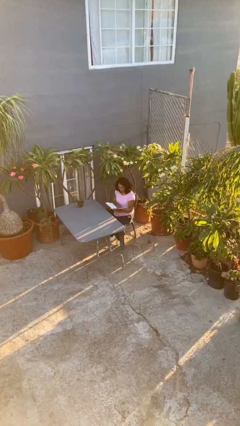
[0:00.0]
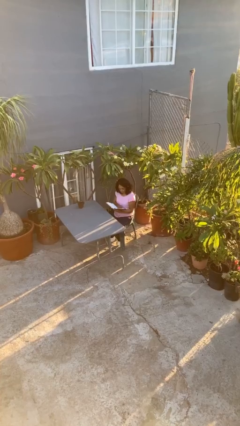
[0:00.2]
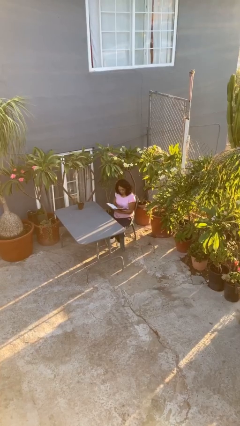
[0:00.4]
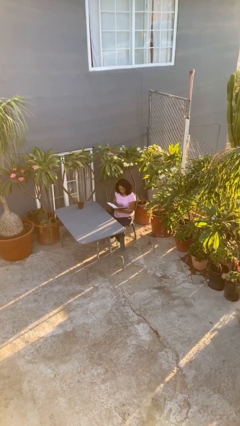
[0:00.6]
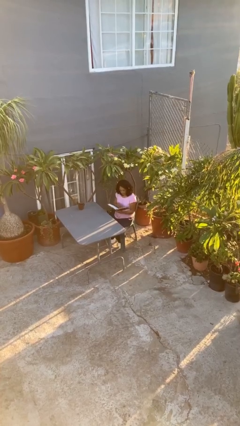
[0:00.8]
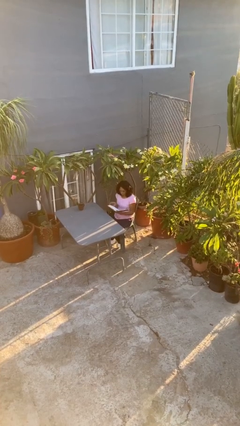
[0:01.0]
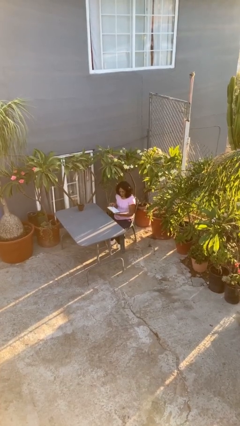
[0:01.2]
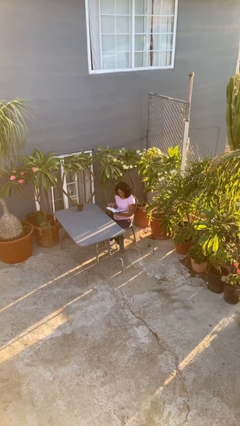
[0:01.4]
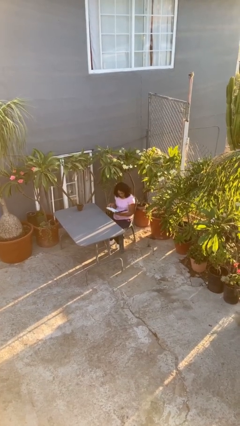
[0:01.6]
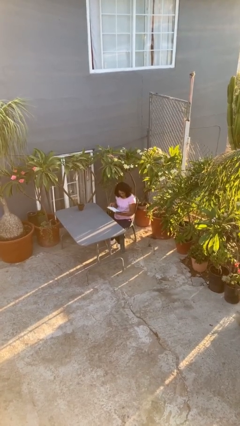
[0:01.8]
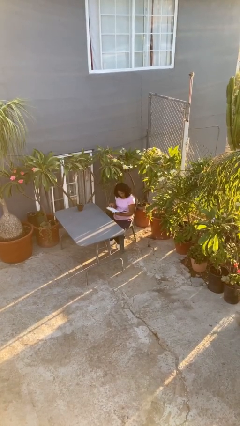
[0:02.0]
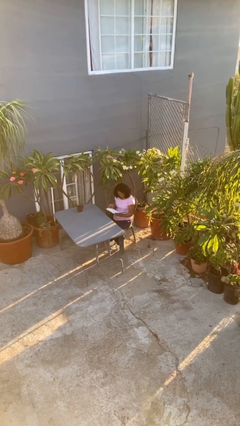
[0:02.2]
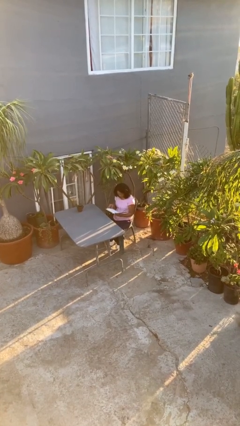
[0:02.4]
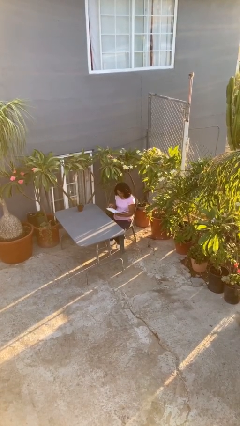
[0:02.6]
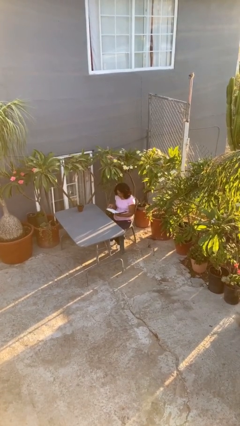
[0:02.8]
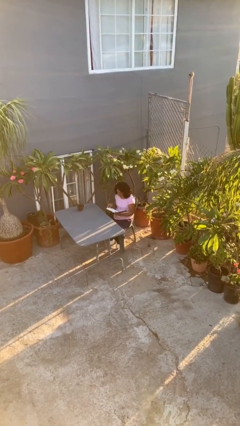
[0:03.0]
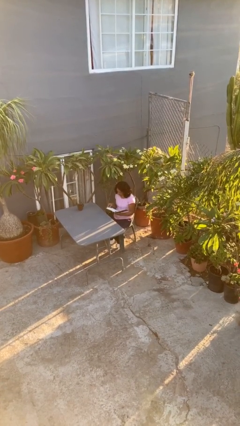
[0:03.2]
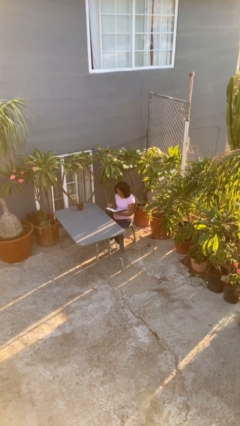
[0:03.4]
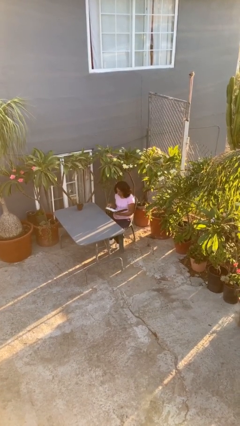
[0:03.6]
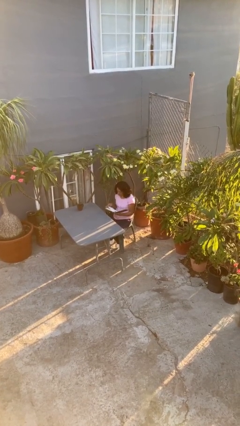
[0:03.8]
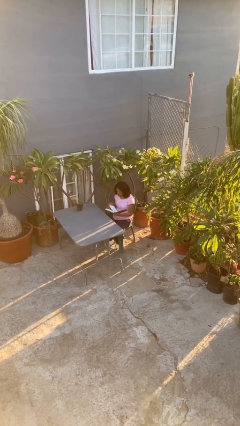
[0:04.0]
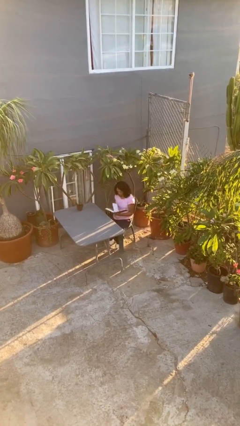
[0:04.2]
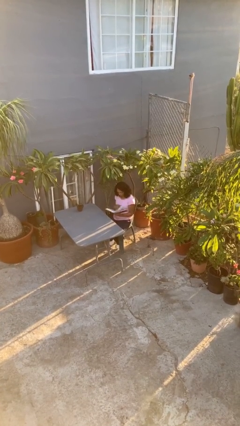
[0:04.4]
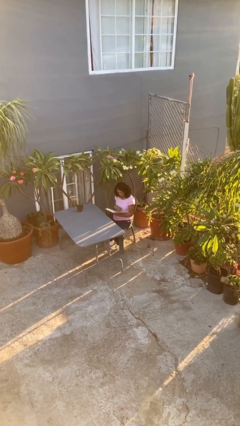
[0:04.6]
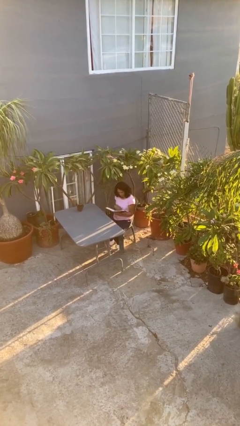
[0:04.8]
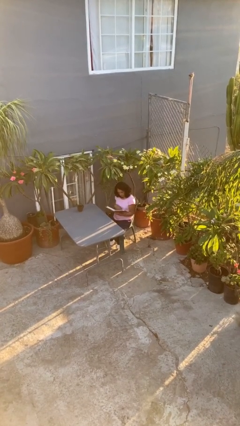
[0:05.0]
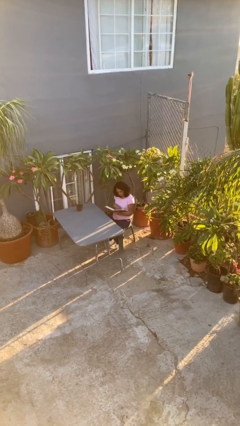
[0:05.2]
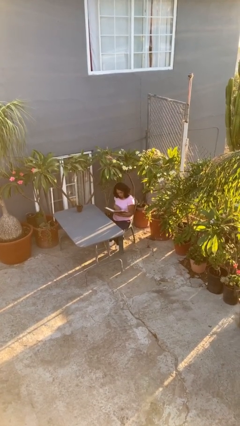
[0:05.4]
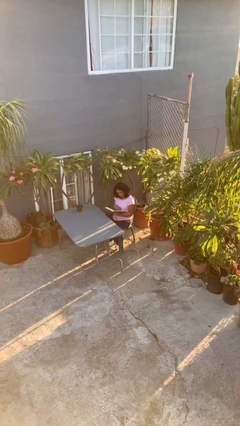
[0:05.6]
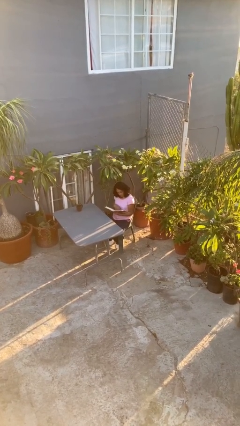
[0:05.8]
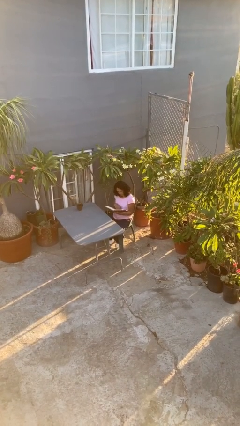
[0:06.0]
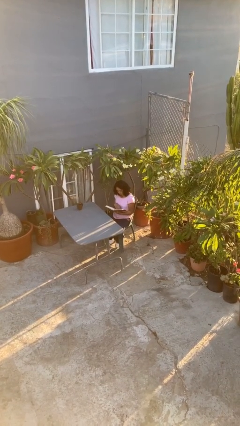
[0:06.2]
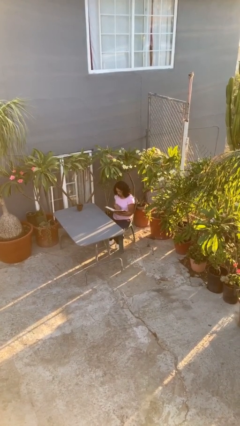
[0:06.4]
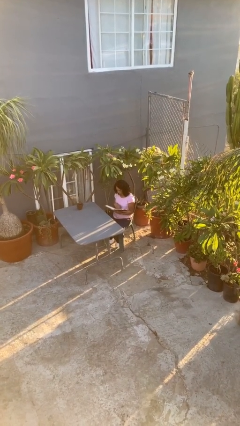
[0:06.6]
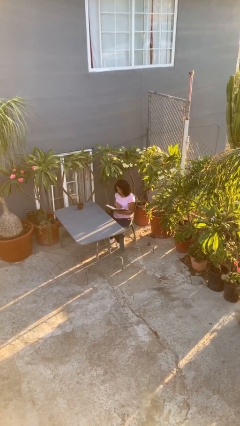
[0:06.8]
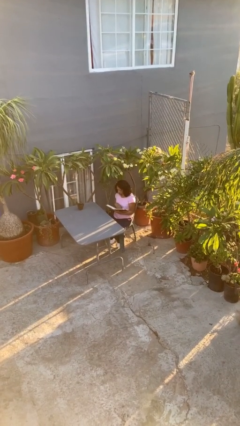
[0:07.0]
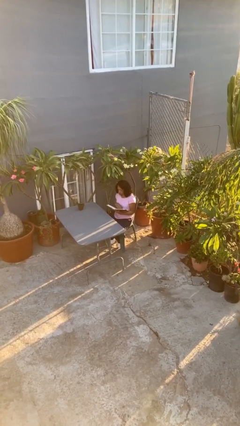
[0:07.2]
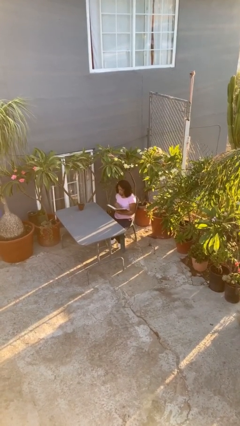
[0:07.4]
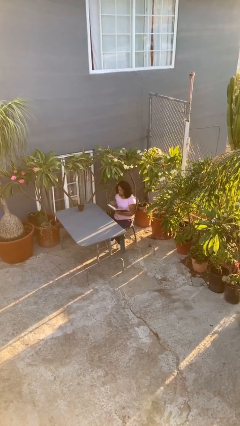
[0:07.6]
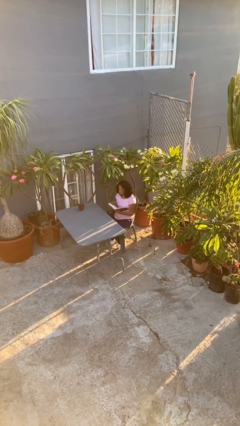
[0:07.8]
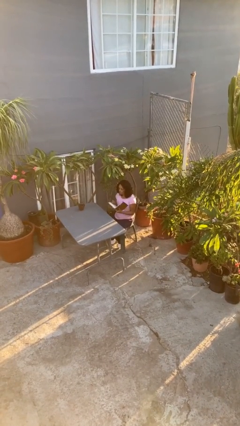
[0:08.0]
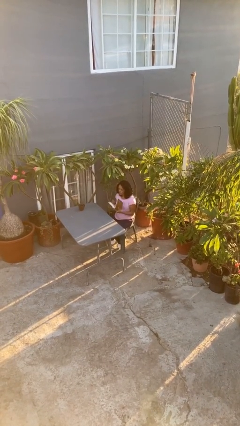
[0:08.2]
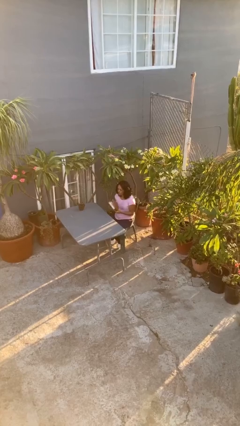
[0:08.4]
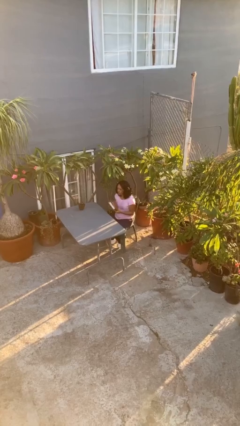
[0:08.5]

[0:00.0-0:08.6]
person reads document

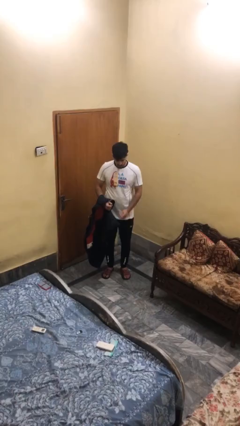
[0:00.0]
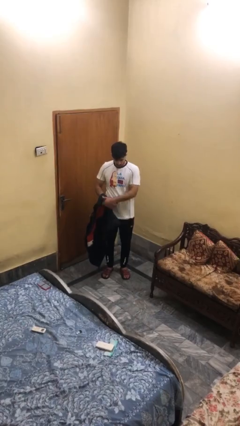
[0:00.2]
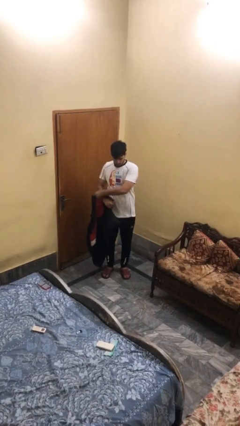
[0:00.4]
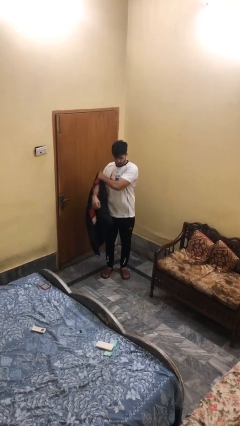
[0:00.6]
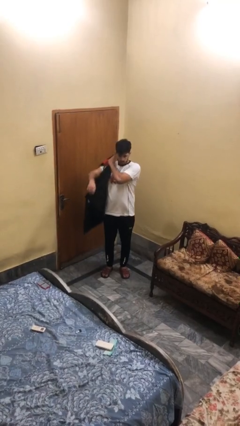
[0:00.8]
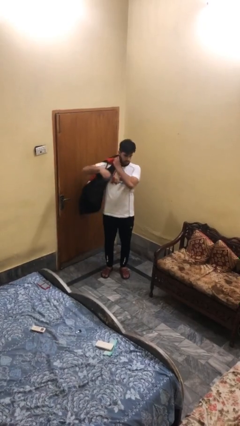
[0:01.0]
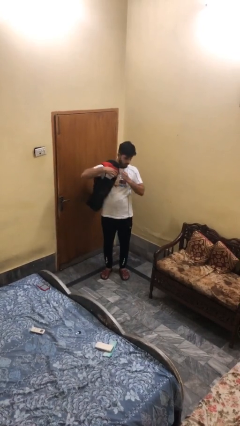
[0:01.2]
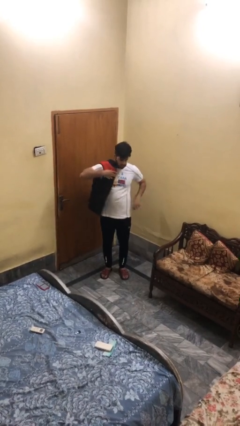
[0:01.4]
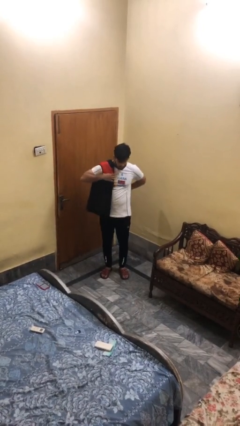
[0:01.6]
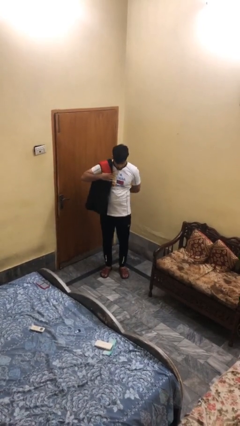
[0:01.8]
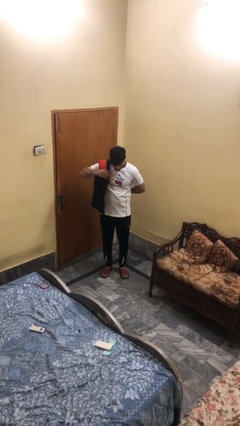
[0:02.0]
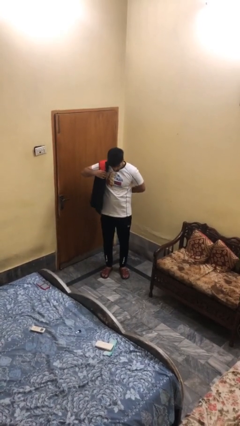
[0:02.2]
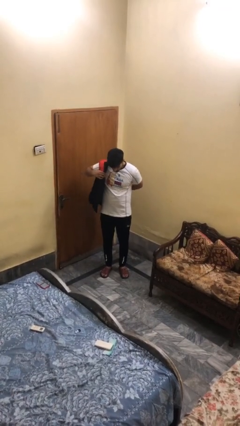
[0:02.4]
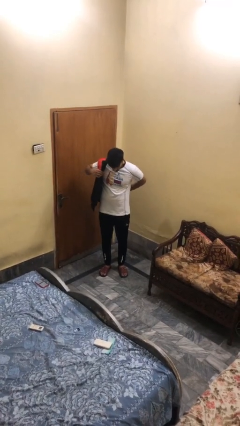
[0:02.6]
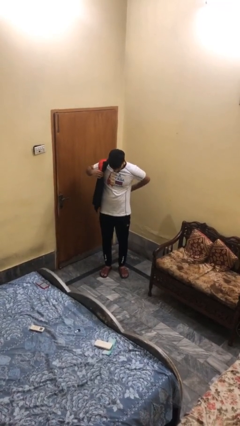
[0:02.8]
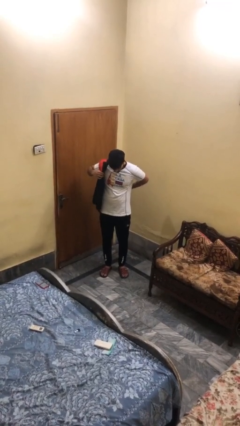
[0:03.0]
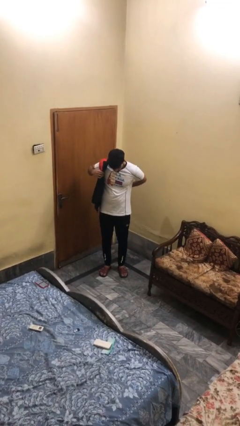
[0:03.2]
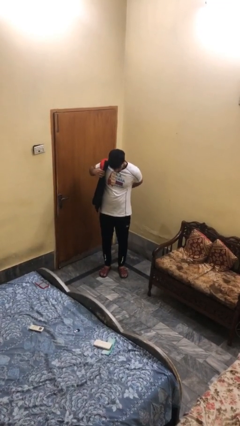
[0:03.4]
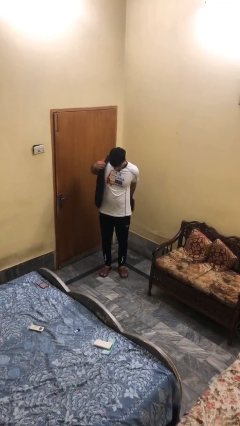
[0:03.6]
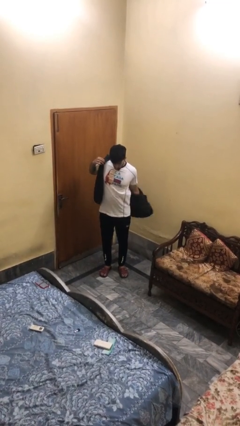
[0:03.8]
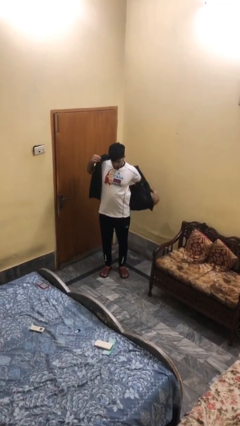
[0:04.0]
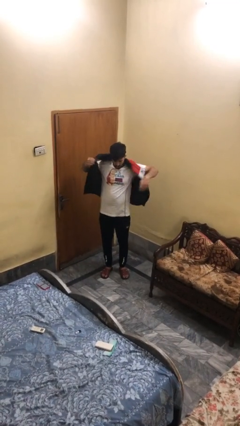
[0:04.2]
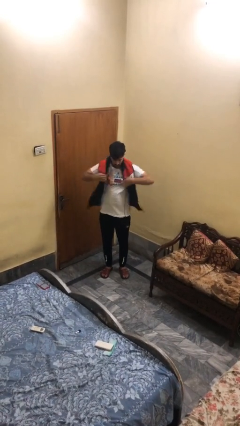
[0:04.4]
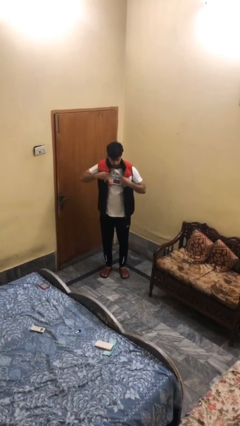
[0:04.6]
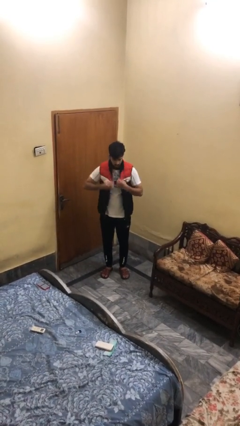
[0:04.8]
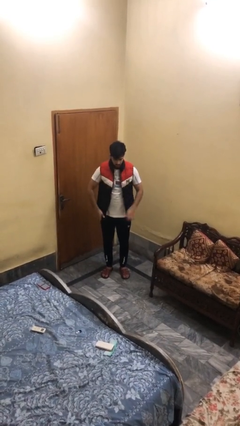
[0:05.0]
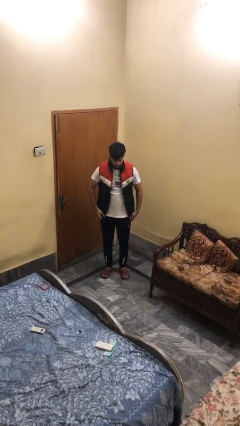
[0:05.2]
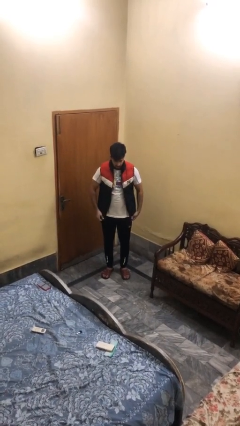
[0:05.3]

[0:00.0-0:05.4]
person puts on jacket

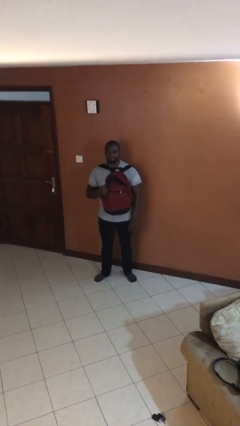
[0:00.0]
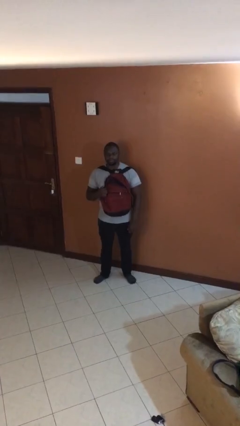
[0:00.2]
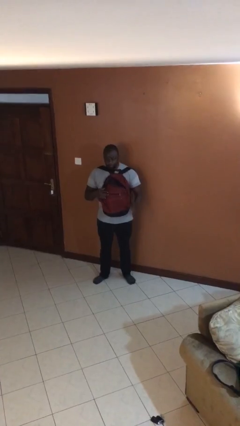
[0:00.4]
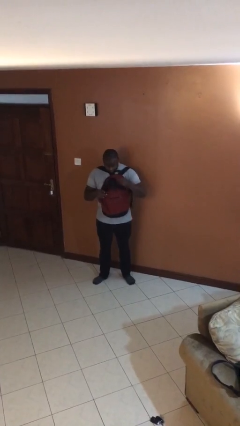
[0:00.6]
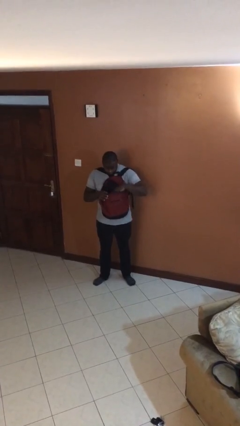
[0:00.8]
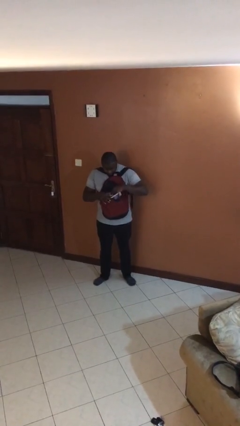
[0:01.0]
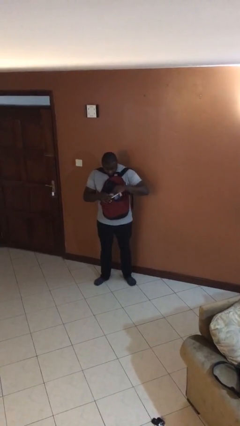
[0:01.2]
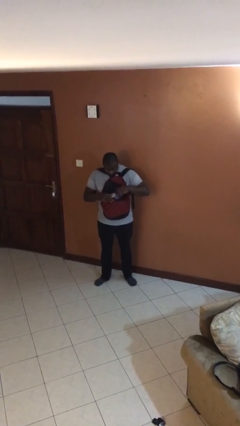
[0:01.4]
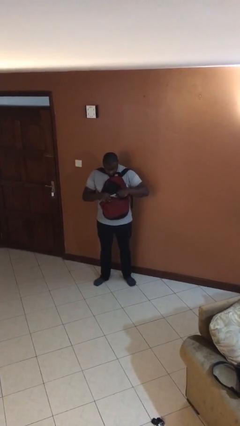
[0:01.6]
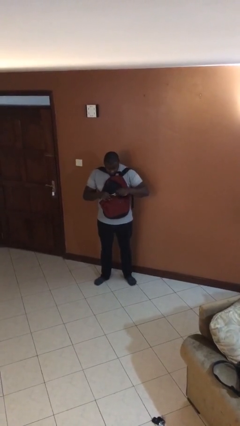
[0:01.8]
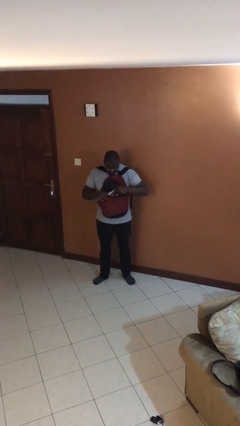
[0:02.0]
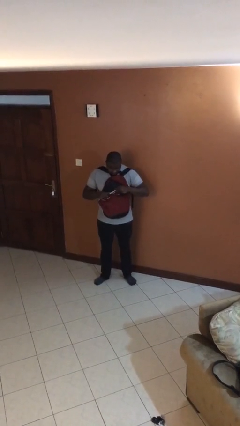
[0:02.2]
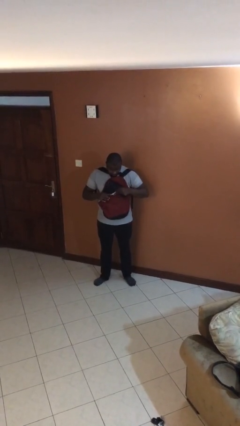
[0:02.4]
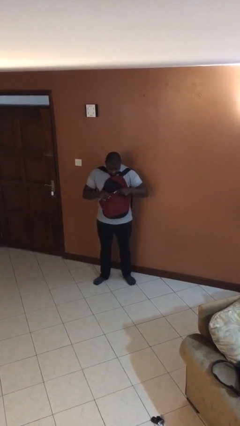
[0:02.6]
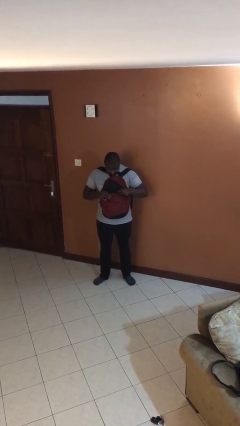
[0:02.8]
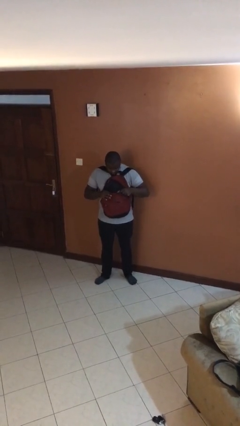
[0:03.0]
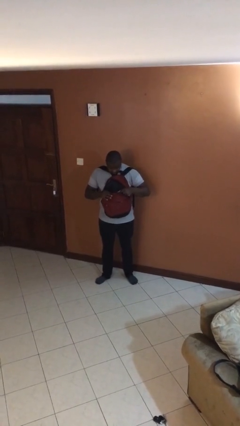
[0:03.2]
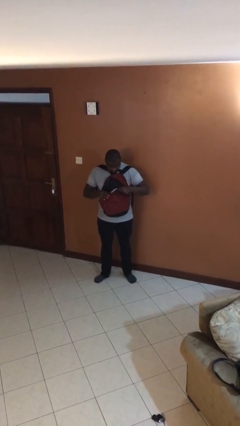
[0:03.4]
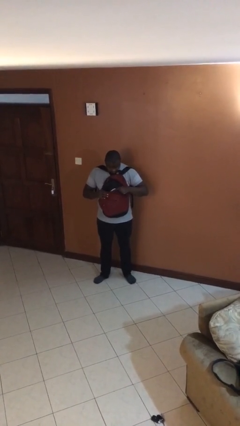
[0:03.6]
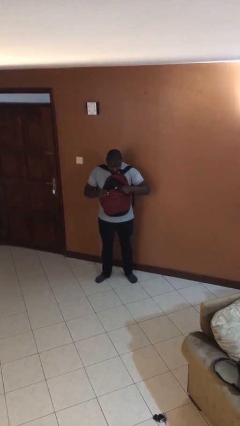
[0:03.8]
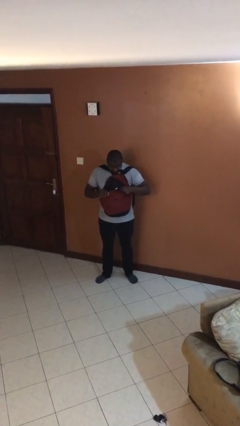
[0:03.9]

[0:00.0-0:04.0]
person searches in backpack
